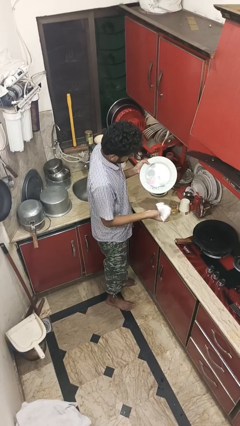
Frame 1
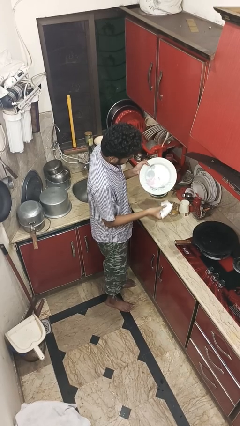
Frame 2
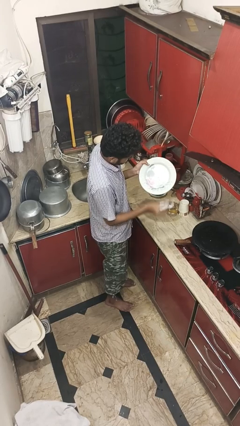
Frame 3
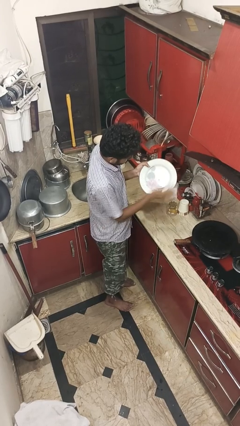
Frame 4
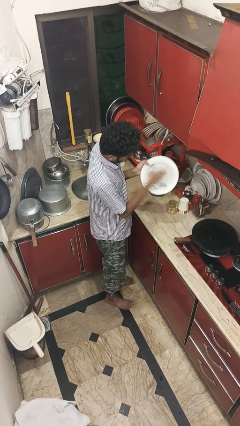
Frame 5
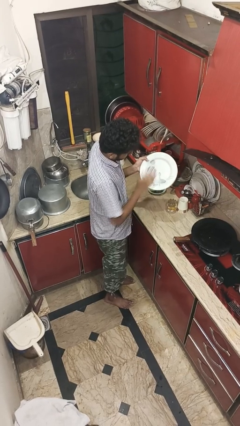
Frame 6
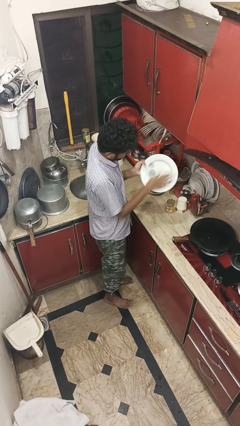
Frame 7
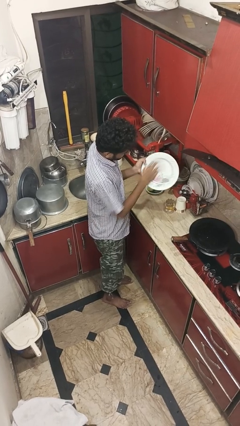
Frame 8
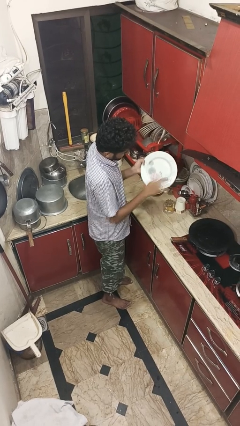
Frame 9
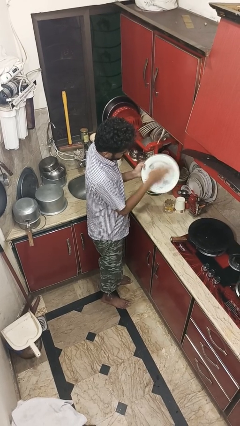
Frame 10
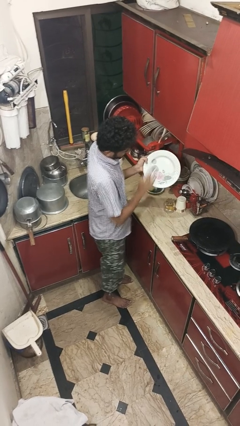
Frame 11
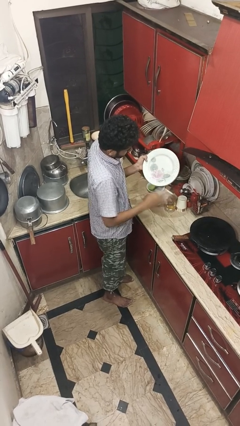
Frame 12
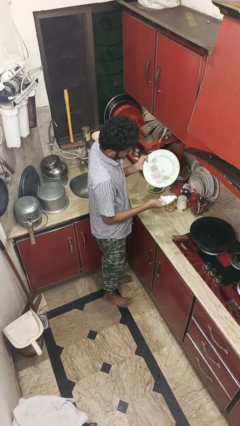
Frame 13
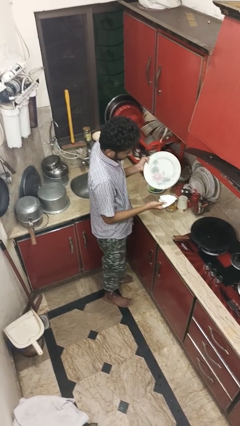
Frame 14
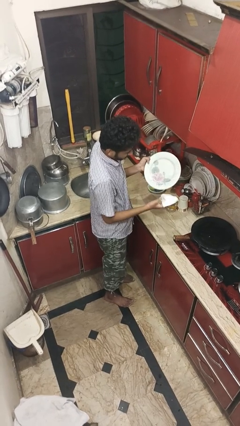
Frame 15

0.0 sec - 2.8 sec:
person dries dish

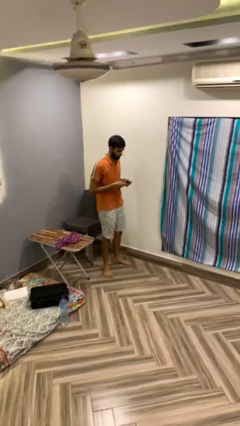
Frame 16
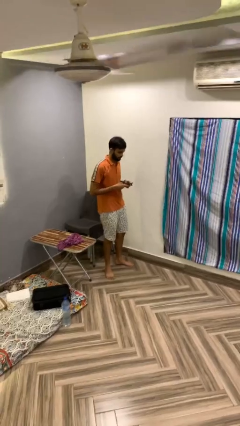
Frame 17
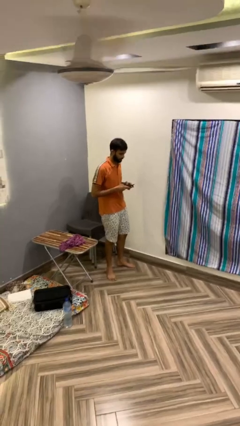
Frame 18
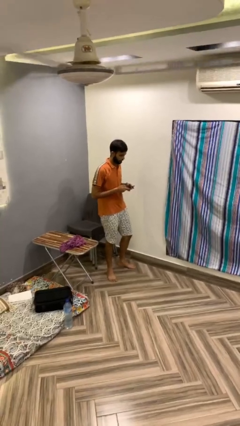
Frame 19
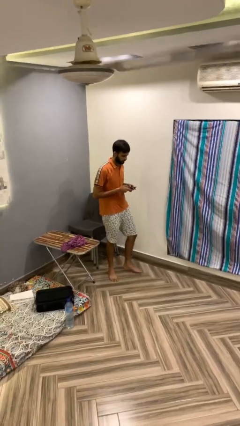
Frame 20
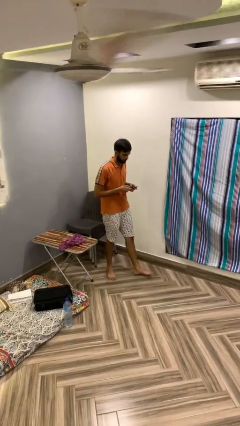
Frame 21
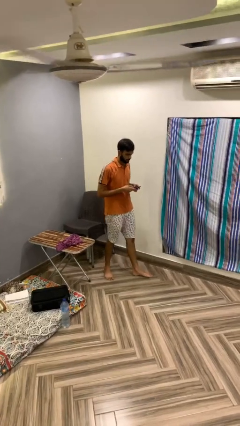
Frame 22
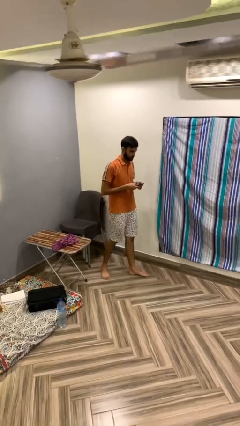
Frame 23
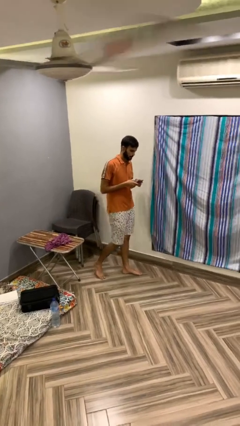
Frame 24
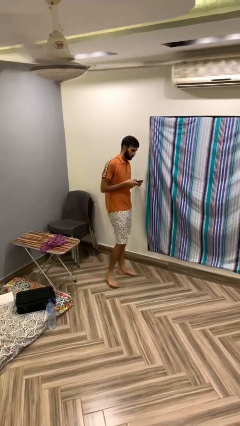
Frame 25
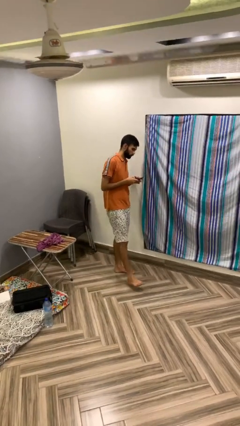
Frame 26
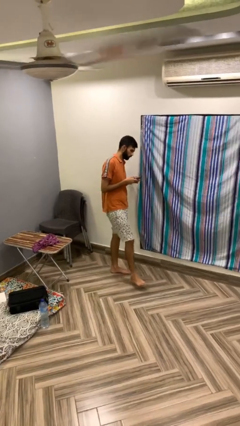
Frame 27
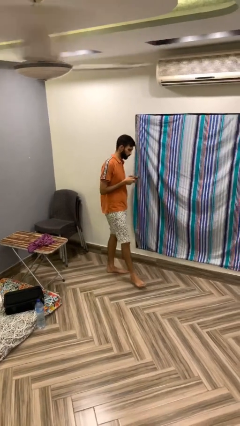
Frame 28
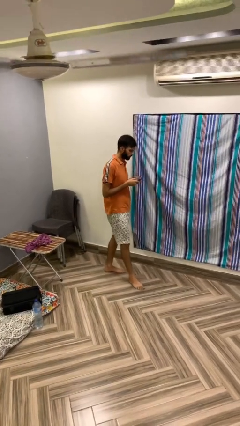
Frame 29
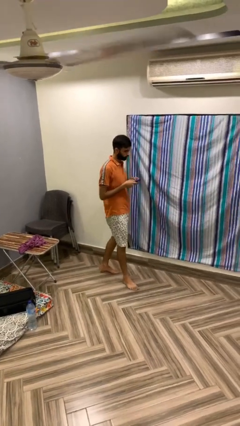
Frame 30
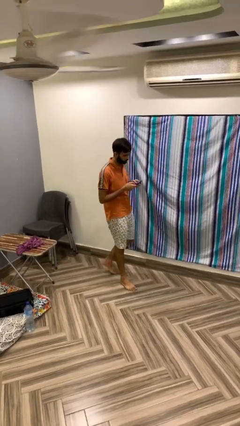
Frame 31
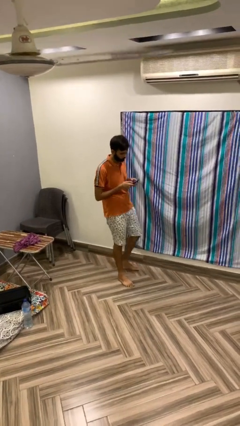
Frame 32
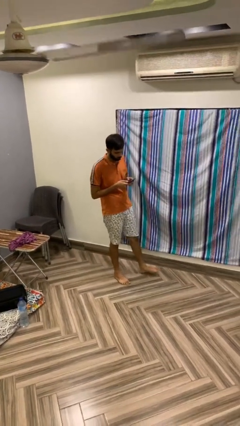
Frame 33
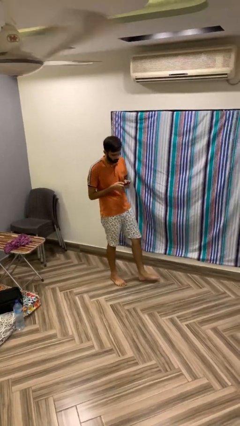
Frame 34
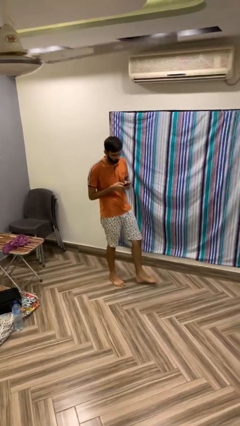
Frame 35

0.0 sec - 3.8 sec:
person texts on phone

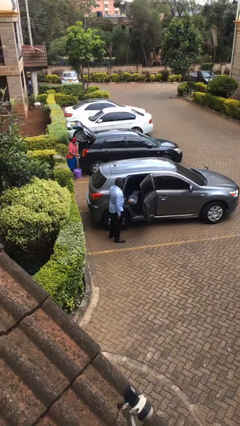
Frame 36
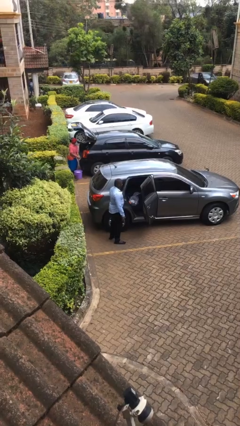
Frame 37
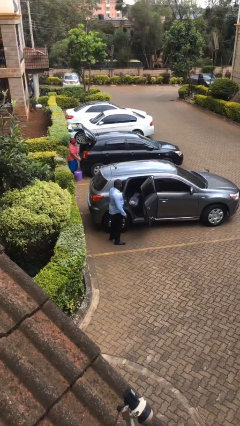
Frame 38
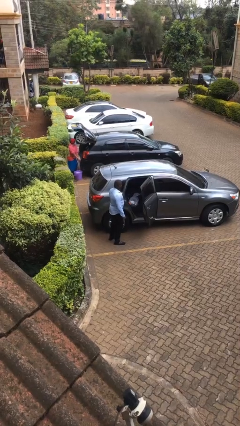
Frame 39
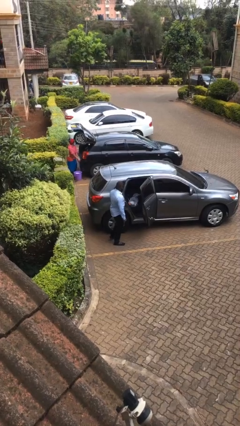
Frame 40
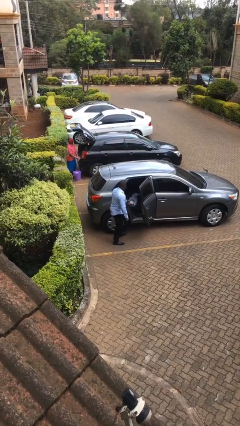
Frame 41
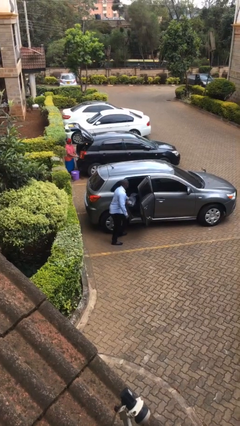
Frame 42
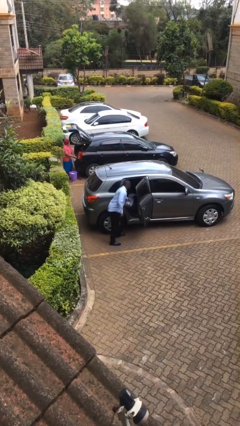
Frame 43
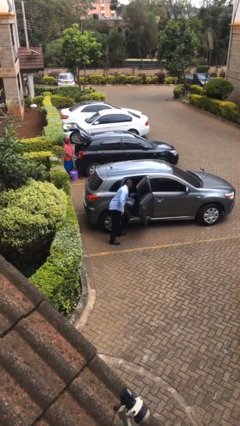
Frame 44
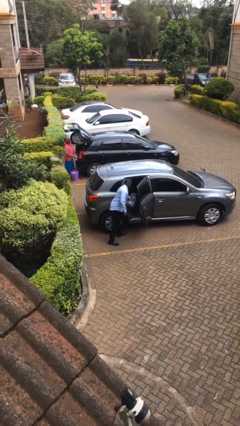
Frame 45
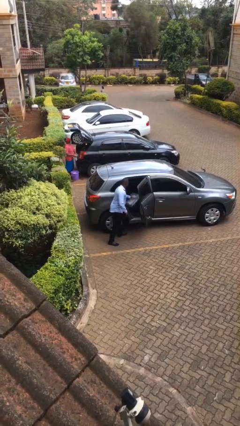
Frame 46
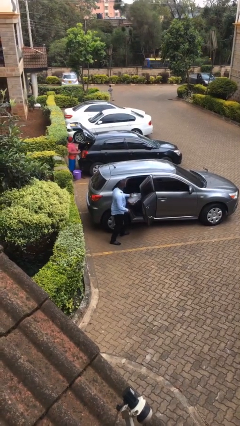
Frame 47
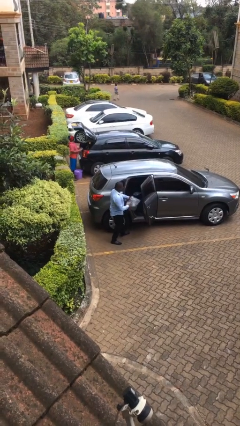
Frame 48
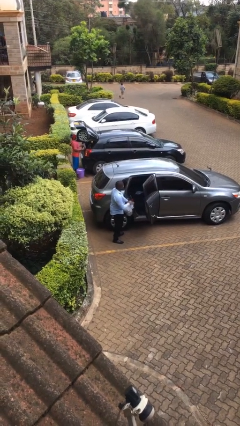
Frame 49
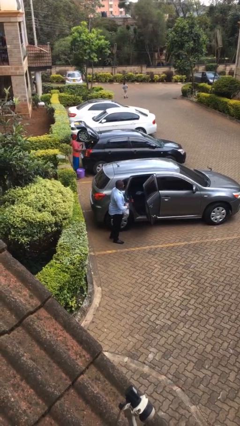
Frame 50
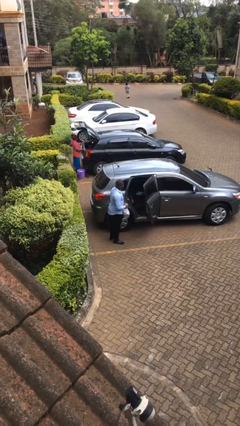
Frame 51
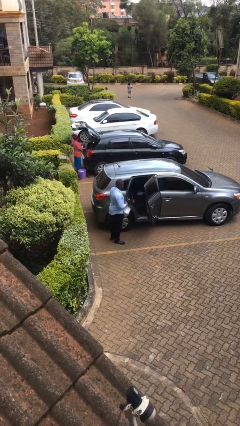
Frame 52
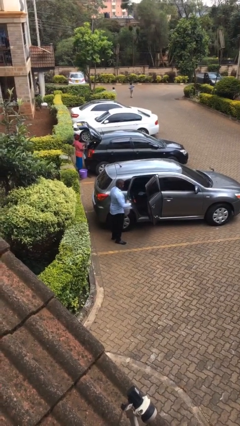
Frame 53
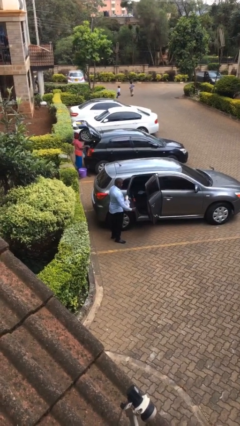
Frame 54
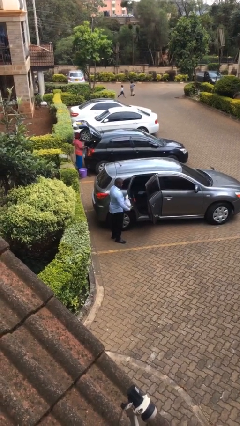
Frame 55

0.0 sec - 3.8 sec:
person unloads car

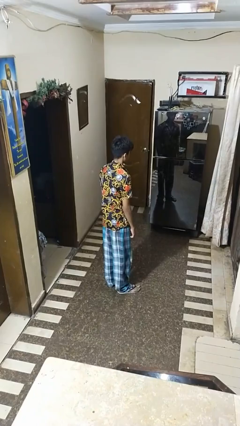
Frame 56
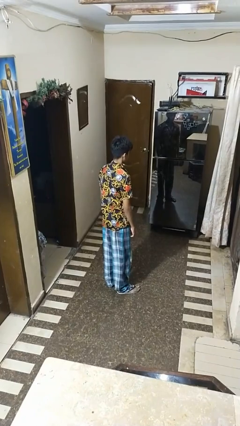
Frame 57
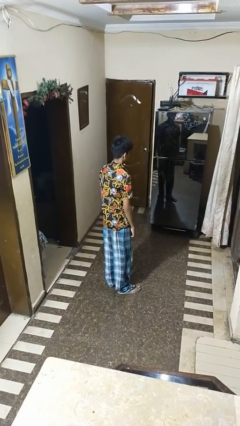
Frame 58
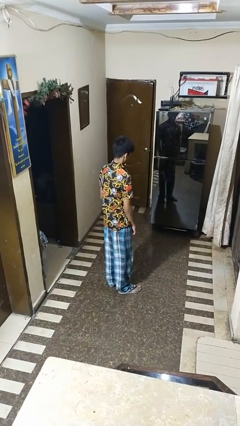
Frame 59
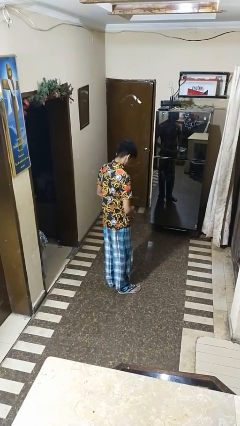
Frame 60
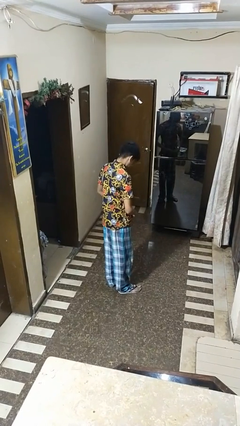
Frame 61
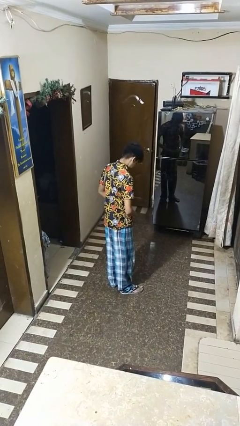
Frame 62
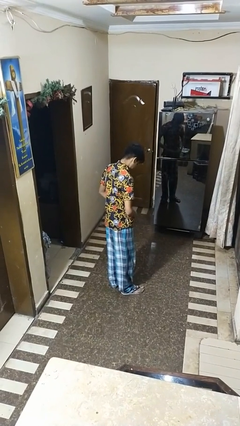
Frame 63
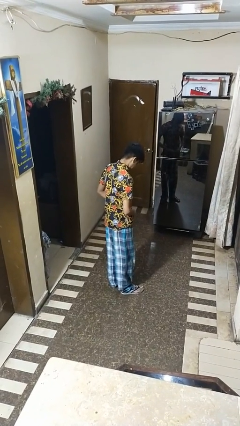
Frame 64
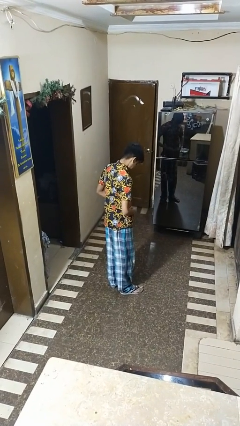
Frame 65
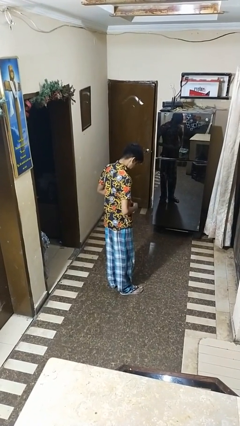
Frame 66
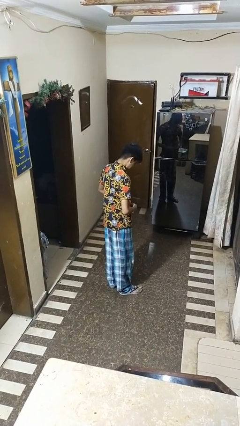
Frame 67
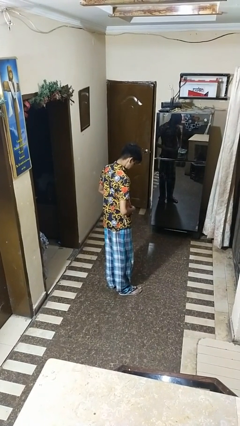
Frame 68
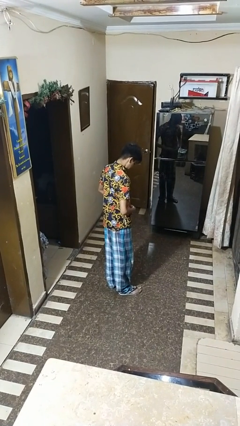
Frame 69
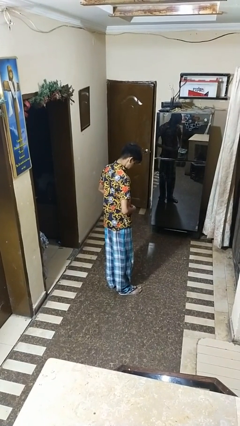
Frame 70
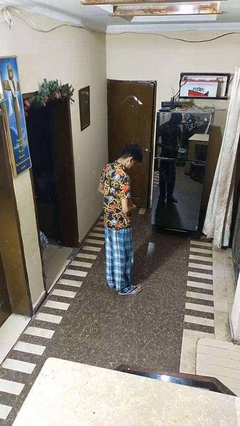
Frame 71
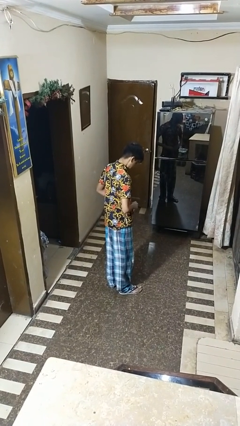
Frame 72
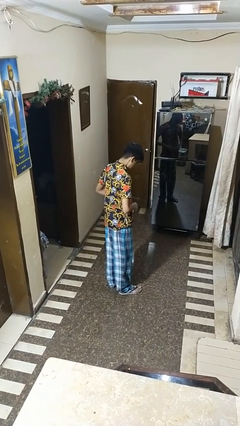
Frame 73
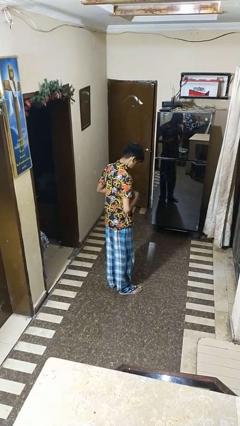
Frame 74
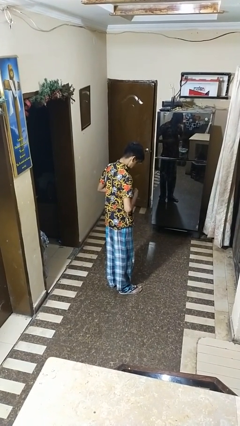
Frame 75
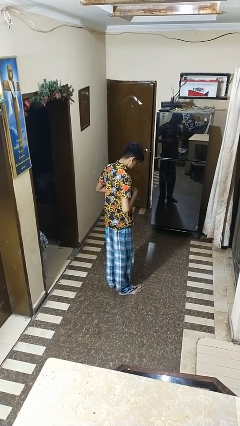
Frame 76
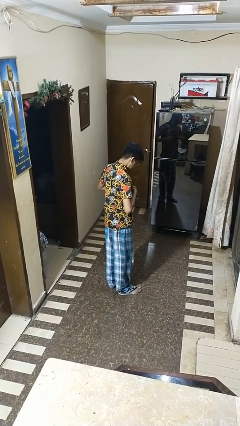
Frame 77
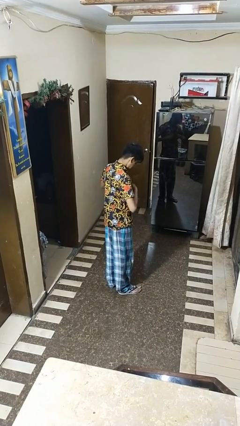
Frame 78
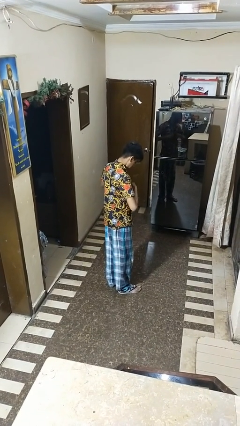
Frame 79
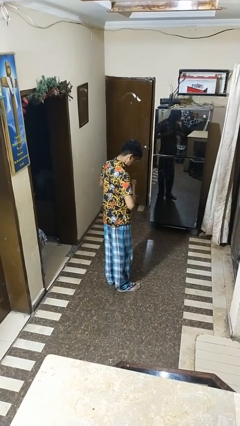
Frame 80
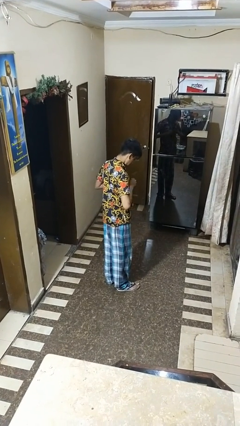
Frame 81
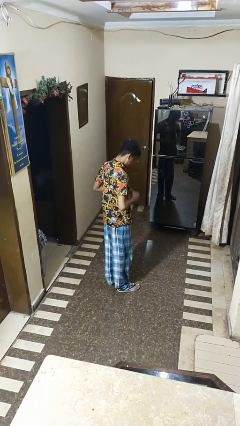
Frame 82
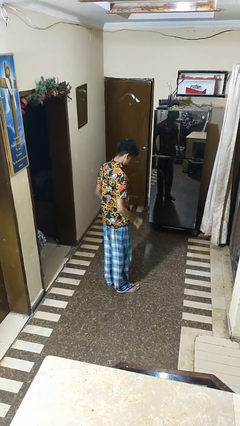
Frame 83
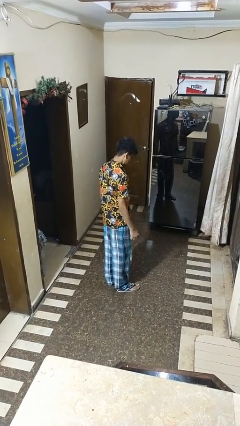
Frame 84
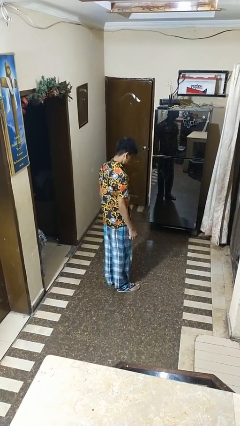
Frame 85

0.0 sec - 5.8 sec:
person unbuttons shirt

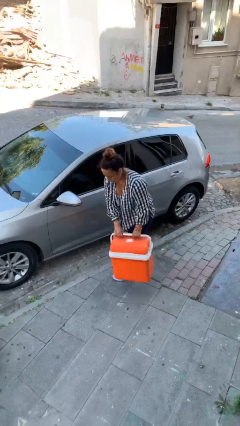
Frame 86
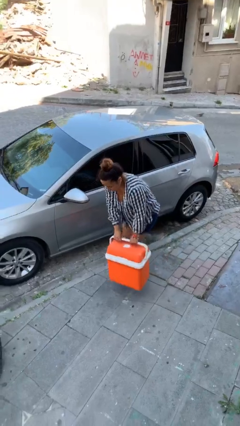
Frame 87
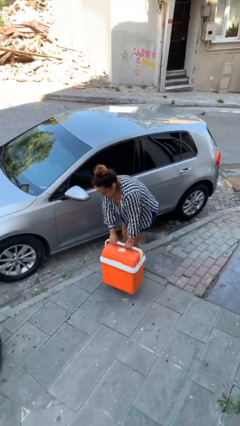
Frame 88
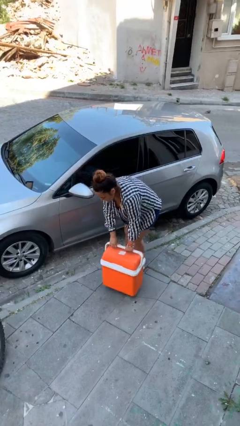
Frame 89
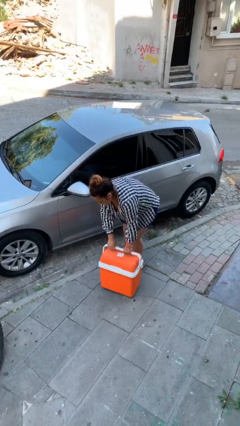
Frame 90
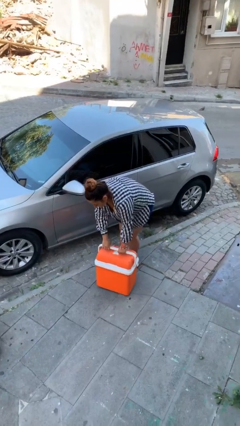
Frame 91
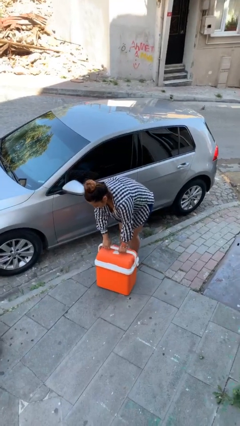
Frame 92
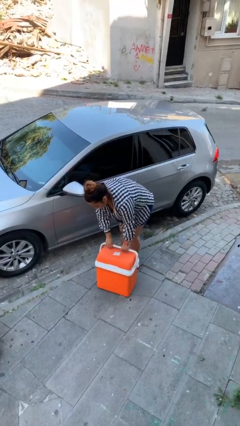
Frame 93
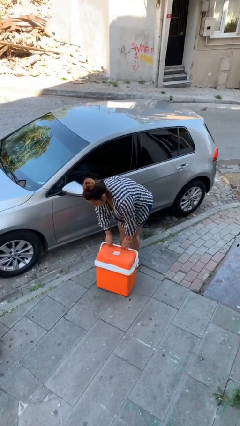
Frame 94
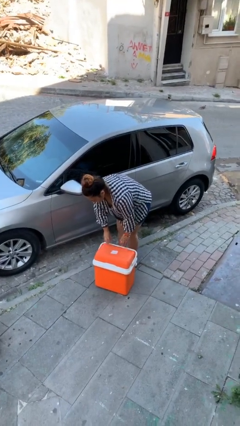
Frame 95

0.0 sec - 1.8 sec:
person puts down object on floor
